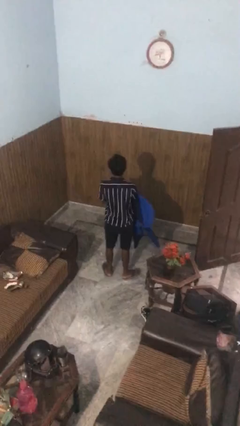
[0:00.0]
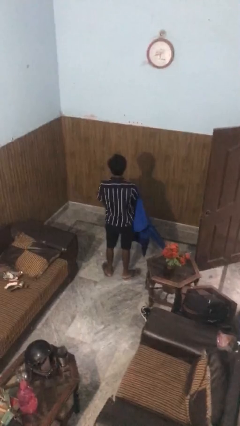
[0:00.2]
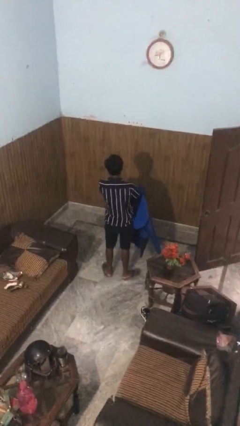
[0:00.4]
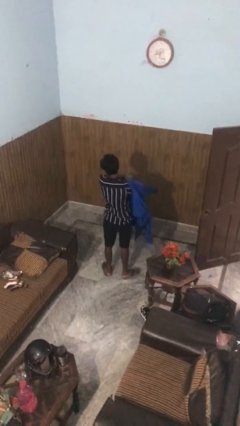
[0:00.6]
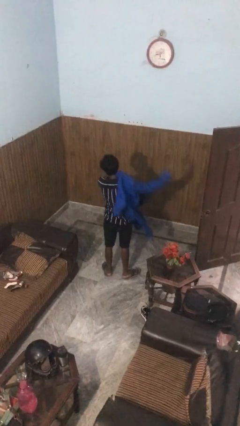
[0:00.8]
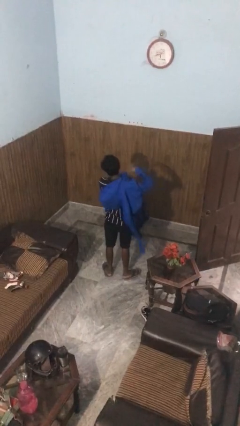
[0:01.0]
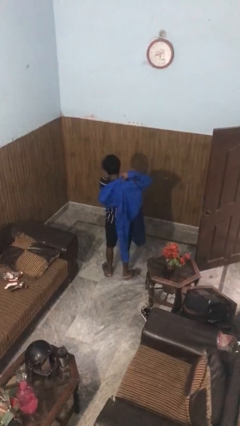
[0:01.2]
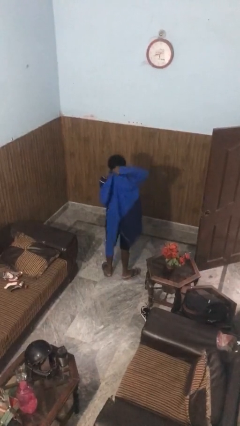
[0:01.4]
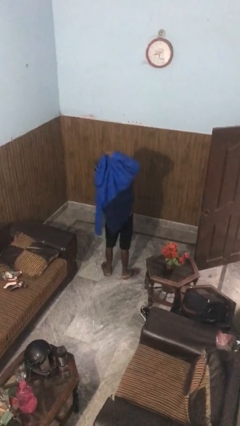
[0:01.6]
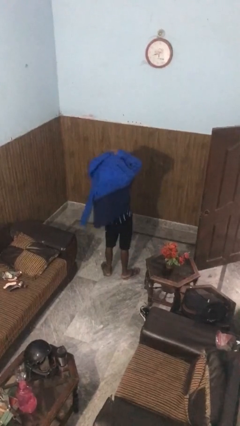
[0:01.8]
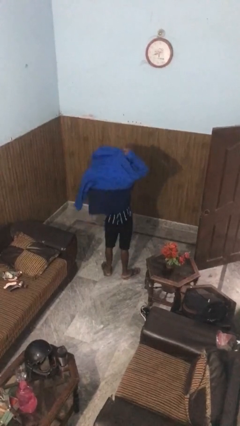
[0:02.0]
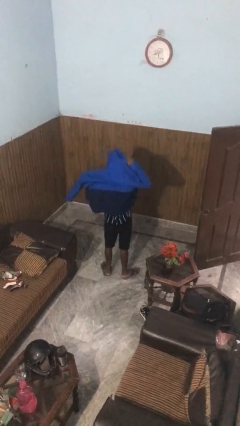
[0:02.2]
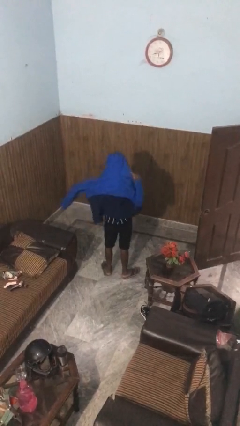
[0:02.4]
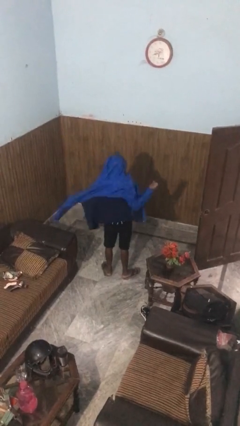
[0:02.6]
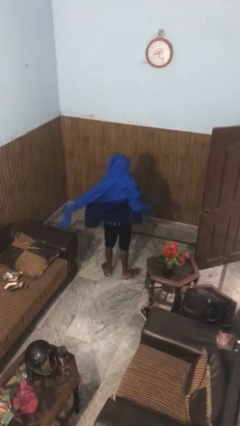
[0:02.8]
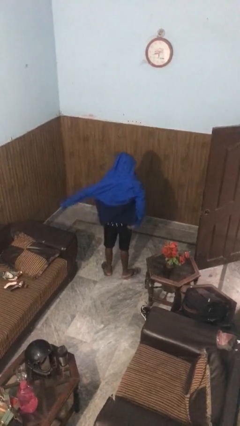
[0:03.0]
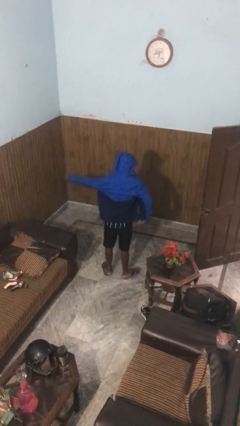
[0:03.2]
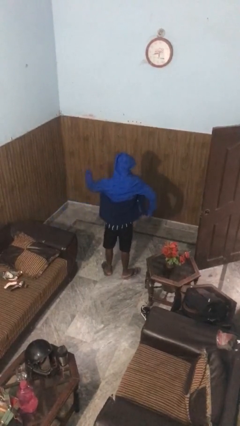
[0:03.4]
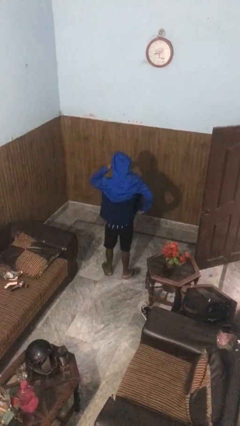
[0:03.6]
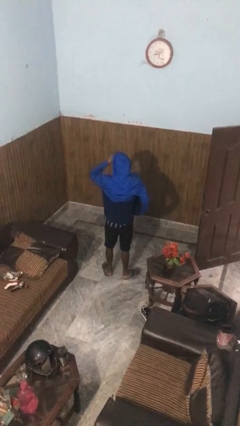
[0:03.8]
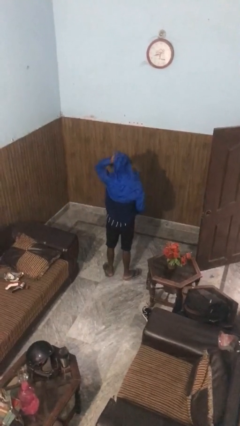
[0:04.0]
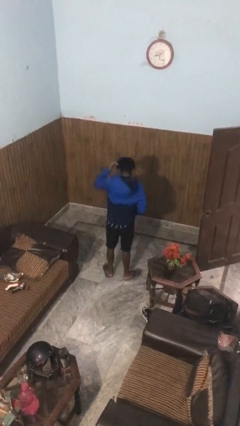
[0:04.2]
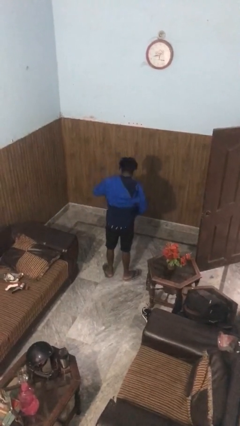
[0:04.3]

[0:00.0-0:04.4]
person puts on jacket

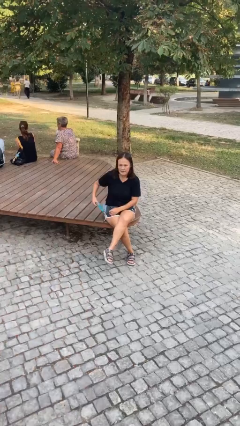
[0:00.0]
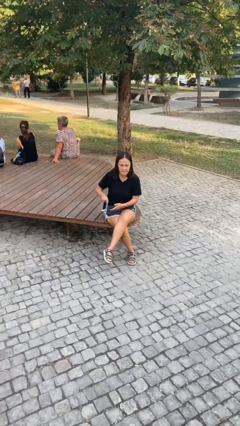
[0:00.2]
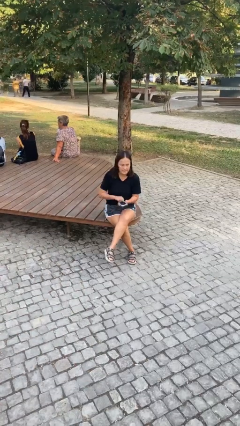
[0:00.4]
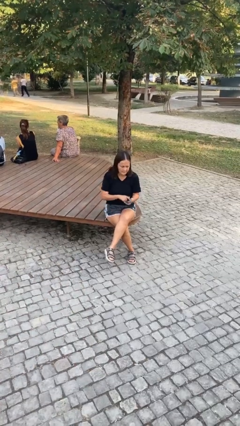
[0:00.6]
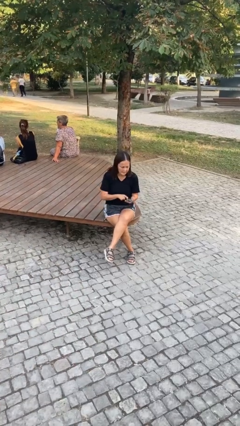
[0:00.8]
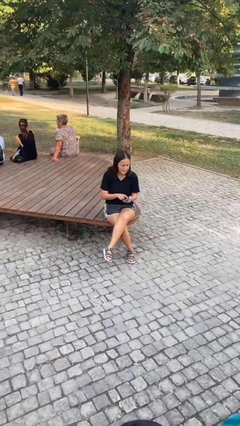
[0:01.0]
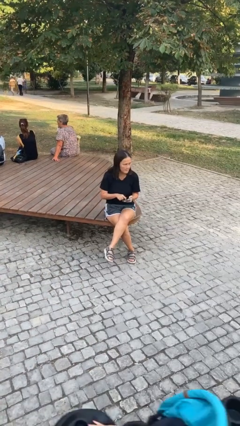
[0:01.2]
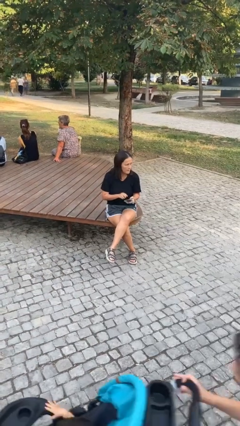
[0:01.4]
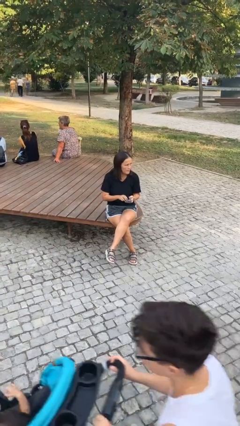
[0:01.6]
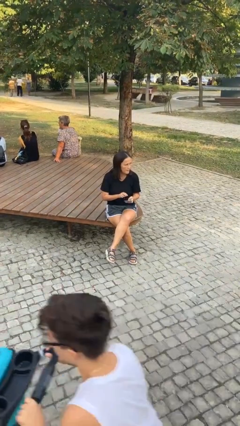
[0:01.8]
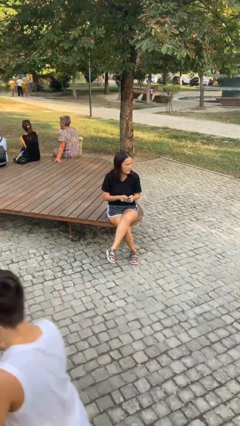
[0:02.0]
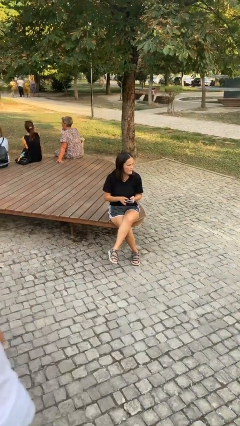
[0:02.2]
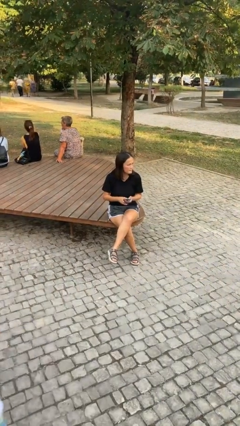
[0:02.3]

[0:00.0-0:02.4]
person takes phone from pocket

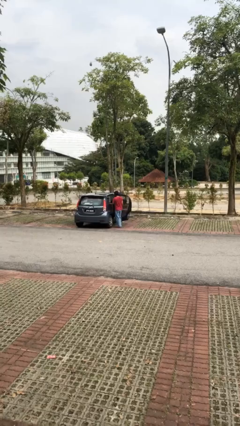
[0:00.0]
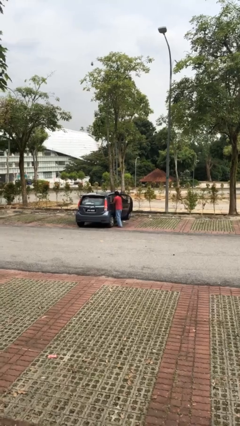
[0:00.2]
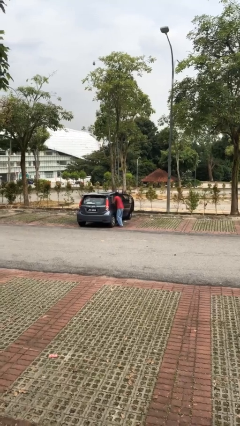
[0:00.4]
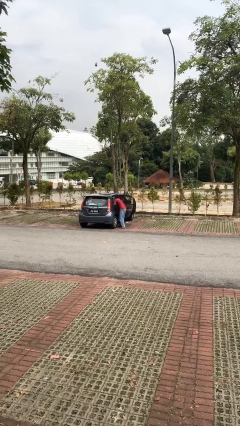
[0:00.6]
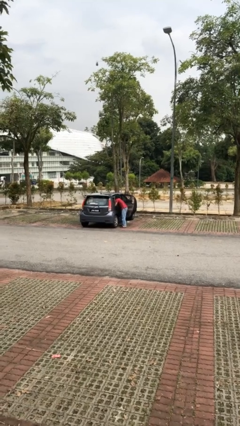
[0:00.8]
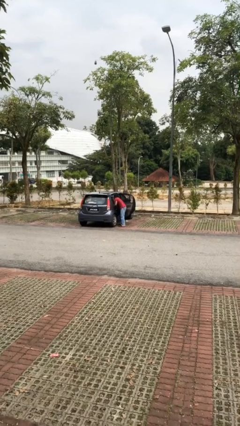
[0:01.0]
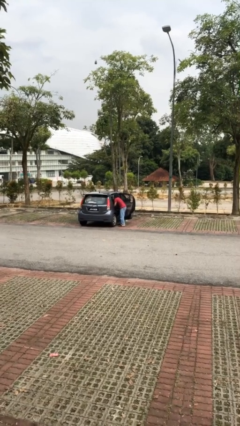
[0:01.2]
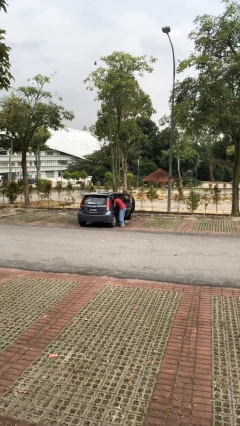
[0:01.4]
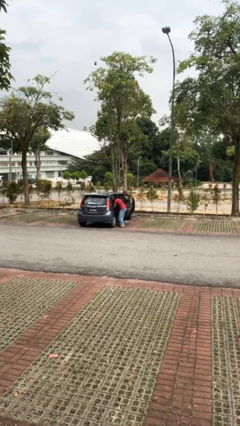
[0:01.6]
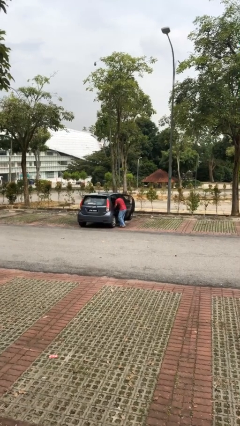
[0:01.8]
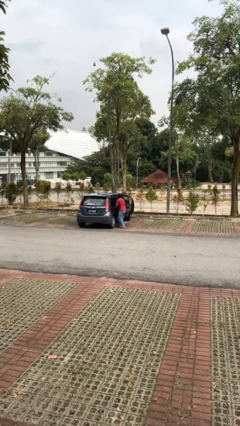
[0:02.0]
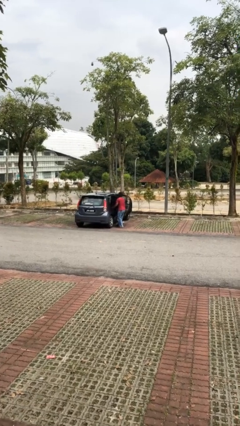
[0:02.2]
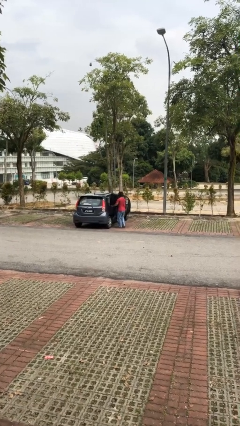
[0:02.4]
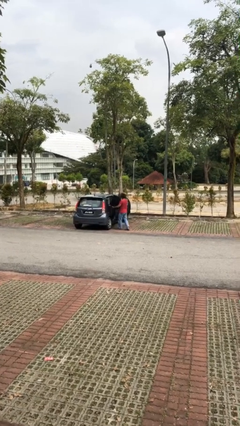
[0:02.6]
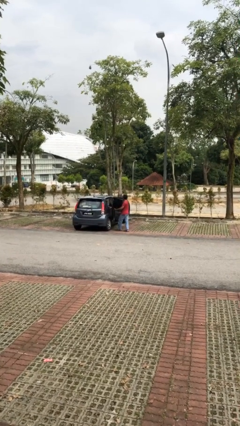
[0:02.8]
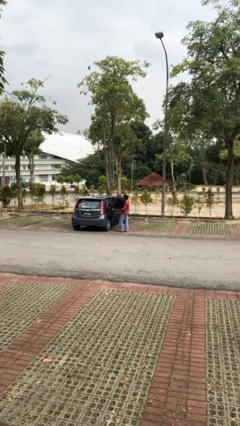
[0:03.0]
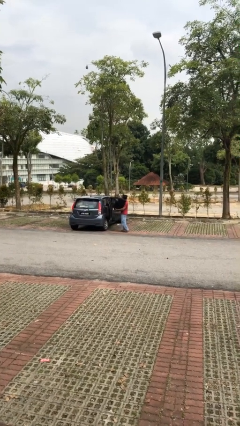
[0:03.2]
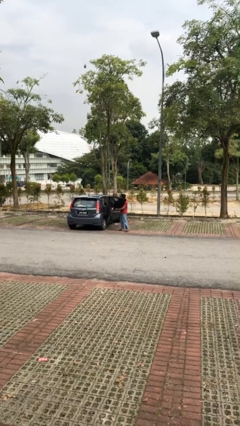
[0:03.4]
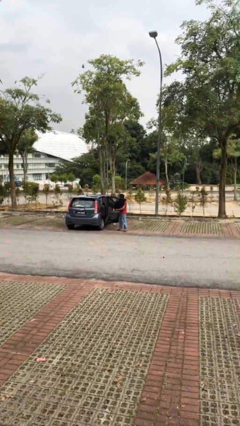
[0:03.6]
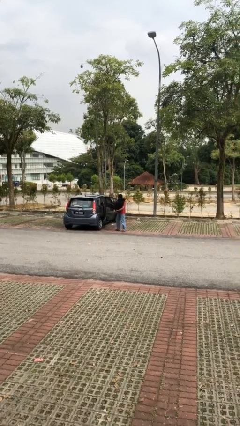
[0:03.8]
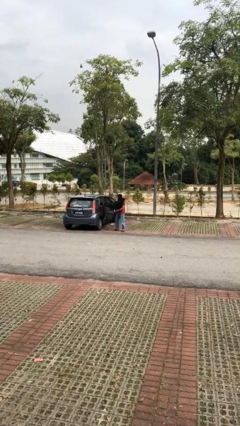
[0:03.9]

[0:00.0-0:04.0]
person unloads car

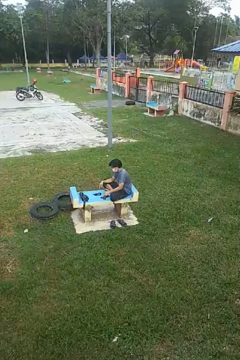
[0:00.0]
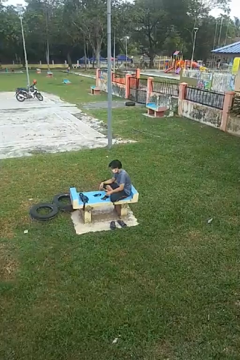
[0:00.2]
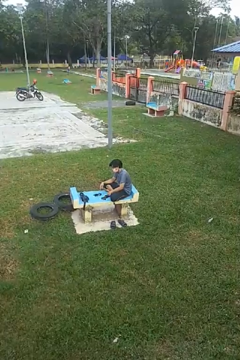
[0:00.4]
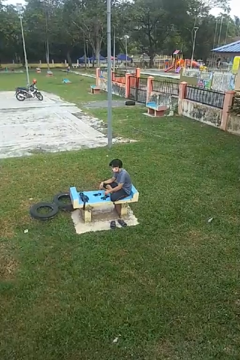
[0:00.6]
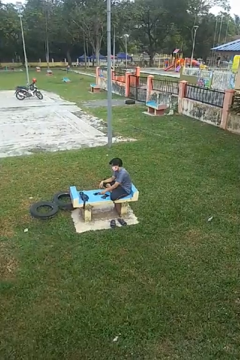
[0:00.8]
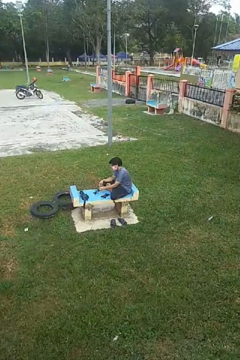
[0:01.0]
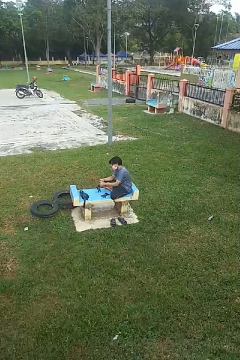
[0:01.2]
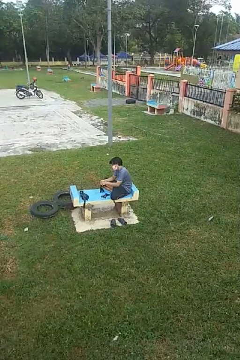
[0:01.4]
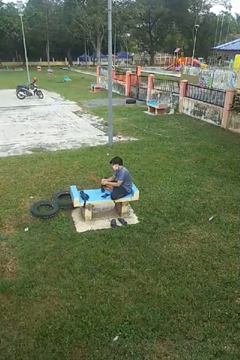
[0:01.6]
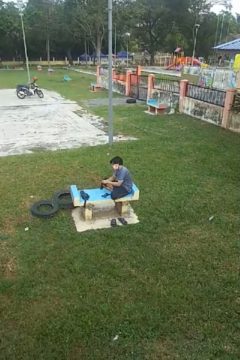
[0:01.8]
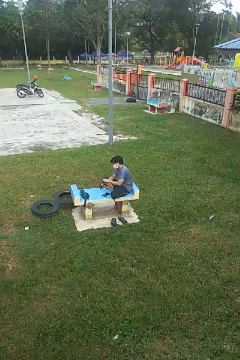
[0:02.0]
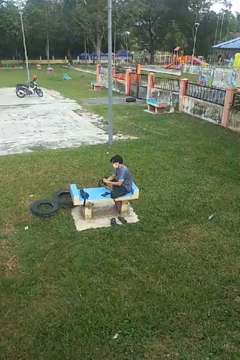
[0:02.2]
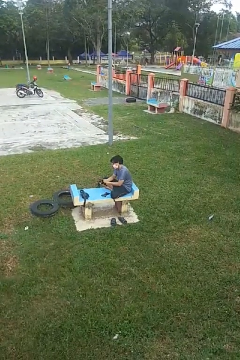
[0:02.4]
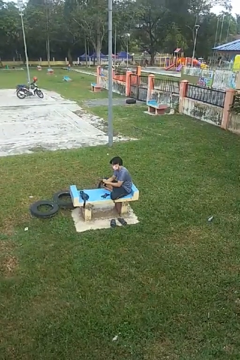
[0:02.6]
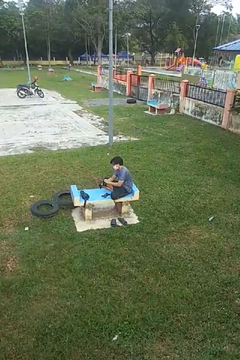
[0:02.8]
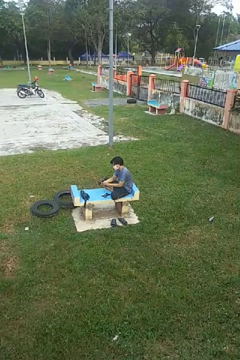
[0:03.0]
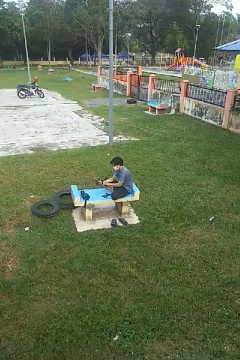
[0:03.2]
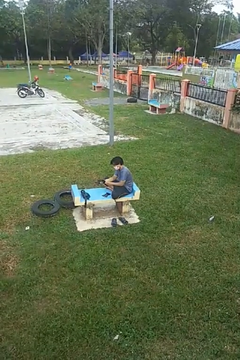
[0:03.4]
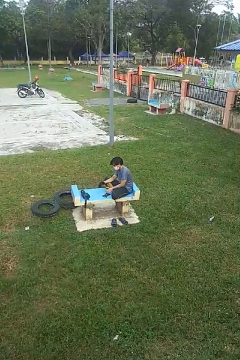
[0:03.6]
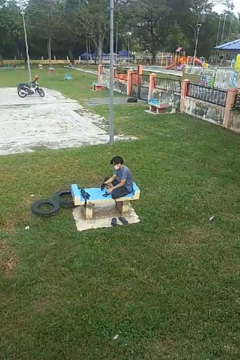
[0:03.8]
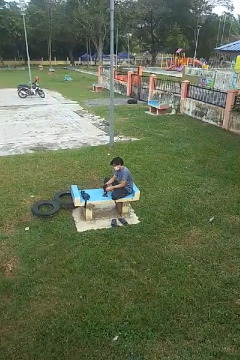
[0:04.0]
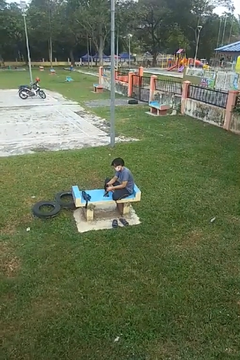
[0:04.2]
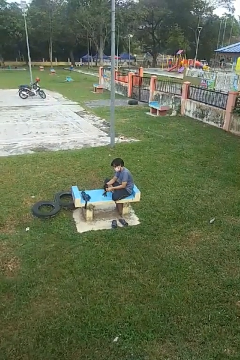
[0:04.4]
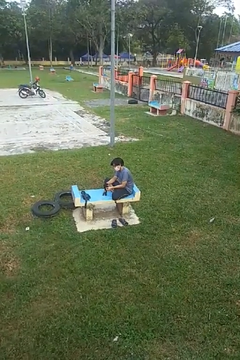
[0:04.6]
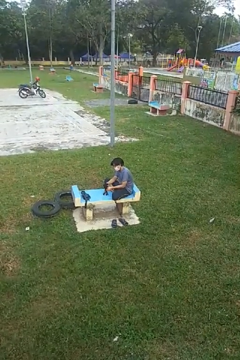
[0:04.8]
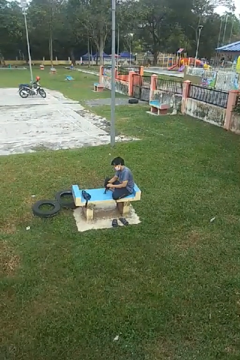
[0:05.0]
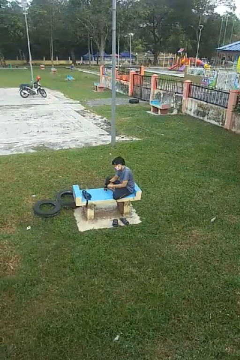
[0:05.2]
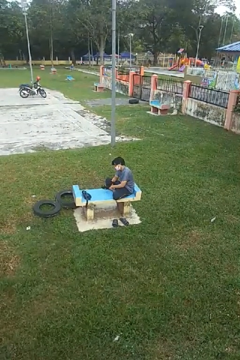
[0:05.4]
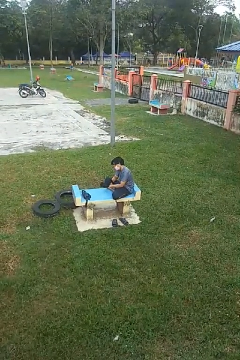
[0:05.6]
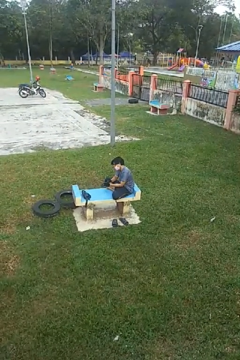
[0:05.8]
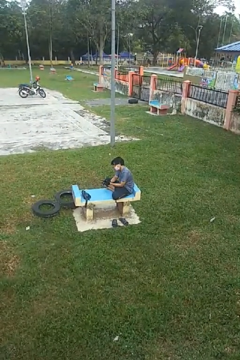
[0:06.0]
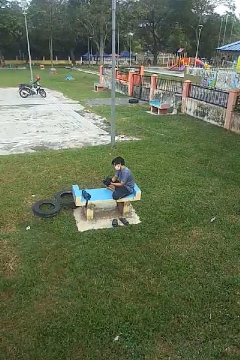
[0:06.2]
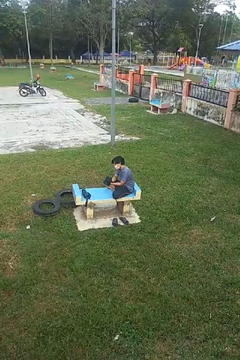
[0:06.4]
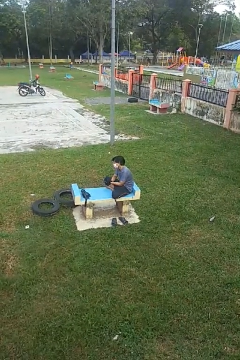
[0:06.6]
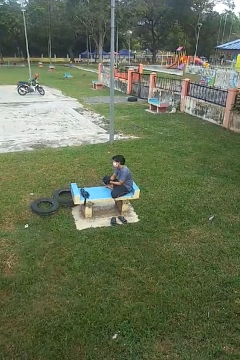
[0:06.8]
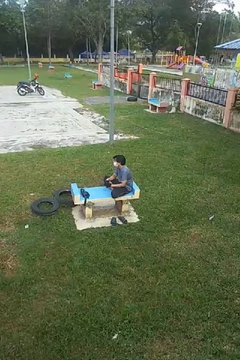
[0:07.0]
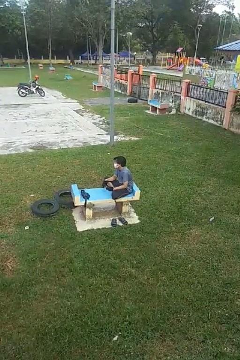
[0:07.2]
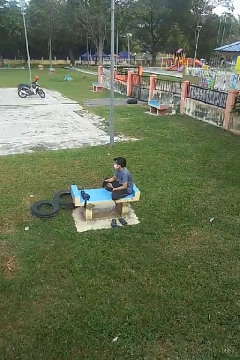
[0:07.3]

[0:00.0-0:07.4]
person puts on gloves

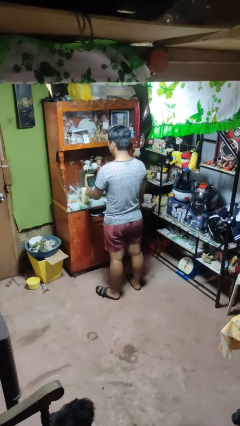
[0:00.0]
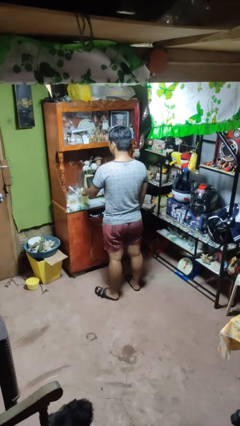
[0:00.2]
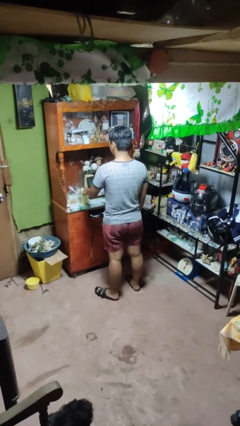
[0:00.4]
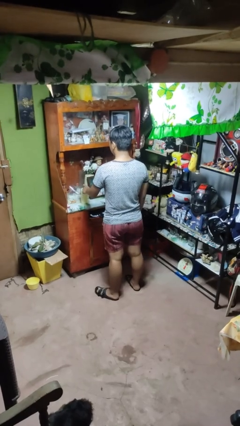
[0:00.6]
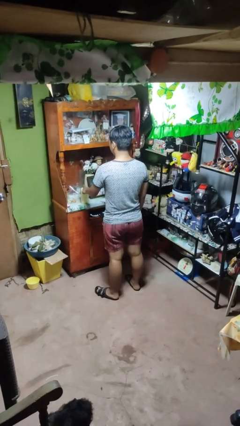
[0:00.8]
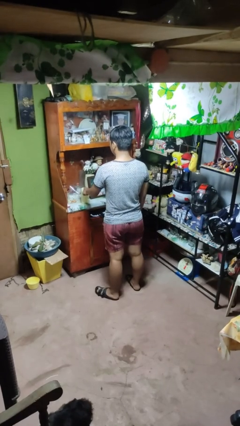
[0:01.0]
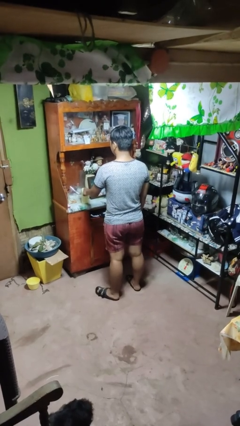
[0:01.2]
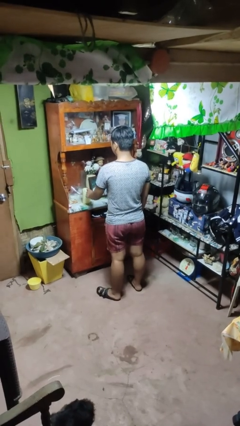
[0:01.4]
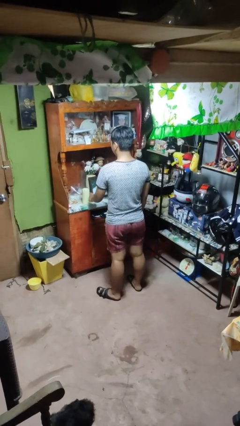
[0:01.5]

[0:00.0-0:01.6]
person taps object with finger
